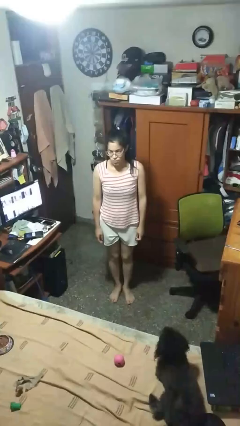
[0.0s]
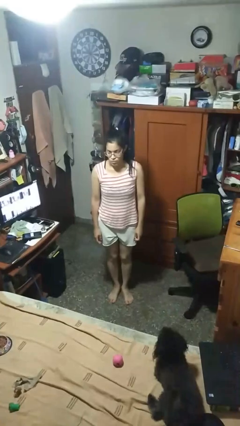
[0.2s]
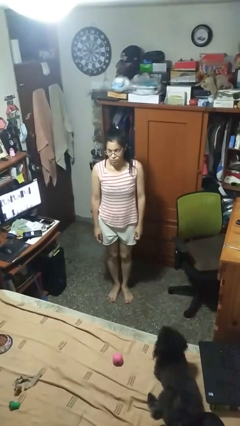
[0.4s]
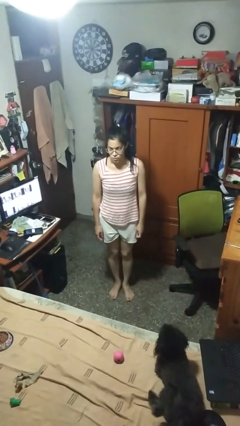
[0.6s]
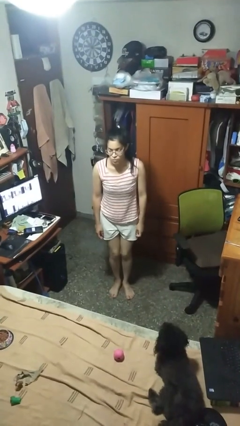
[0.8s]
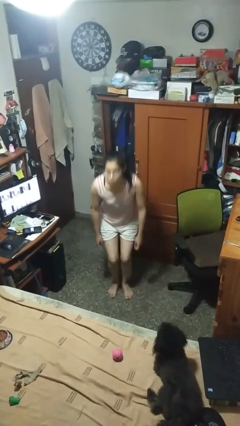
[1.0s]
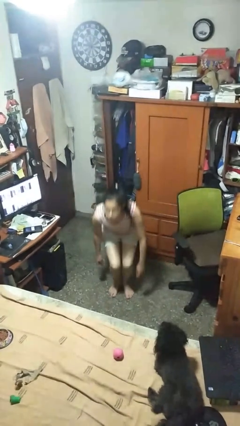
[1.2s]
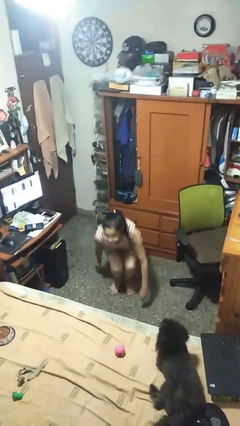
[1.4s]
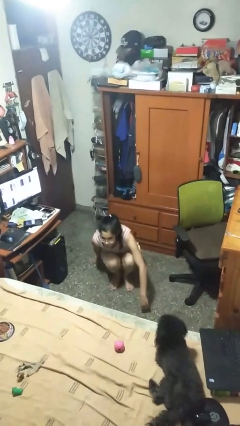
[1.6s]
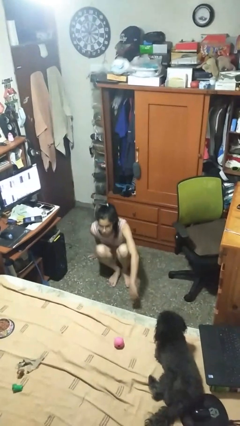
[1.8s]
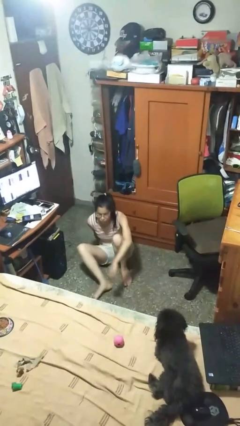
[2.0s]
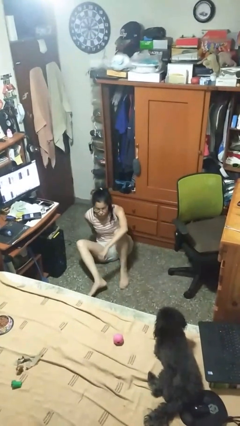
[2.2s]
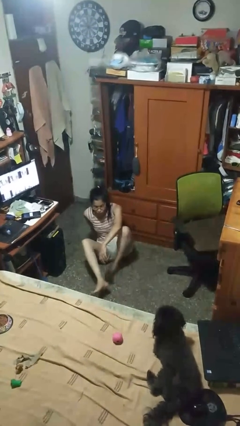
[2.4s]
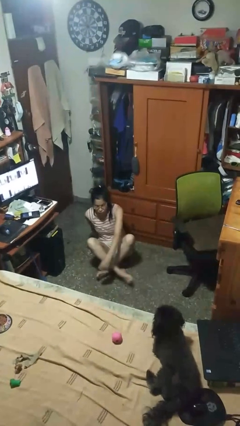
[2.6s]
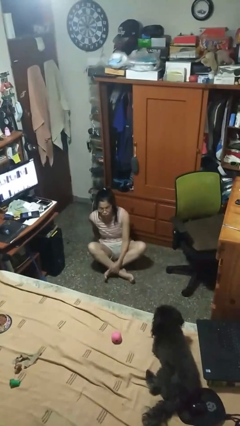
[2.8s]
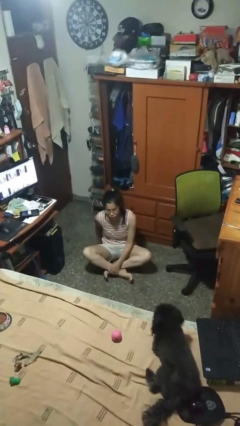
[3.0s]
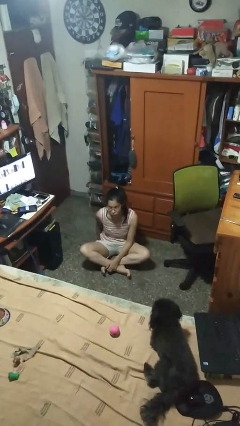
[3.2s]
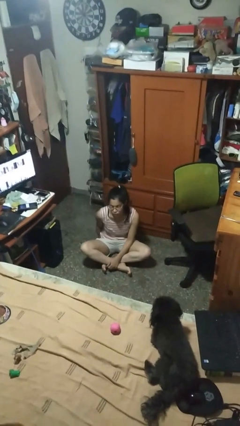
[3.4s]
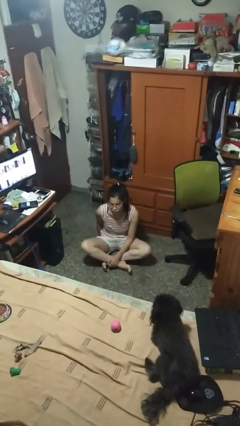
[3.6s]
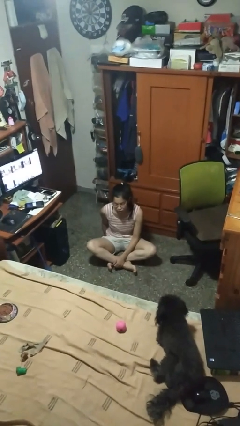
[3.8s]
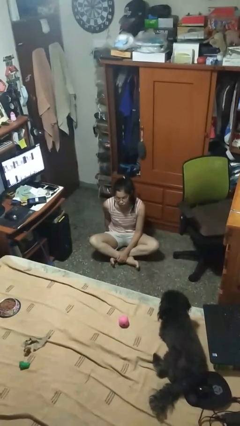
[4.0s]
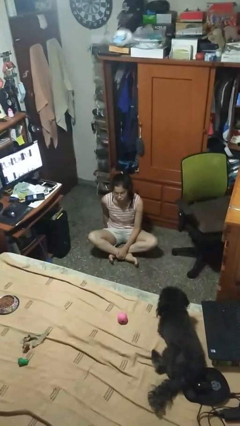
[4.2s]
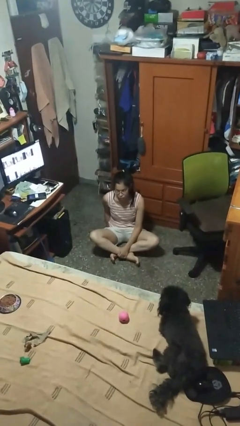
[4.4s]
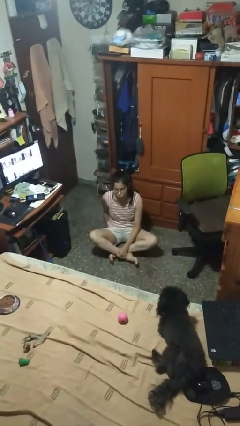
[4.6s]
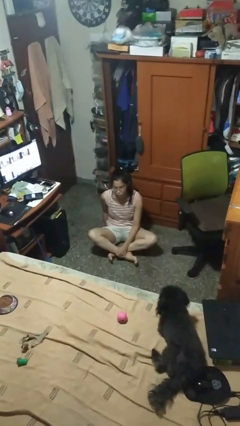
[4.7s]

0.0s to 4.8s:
person sits crisscross

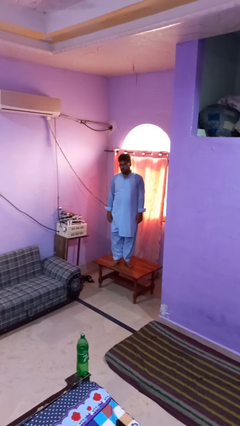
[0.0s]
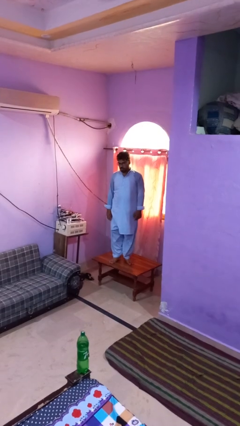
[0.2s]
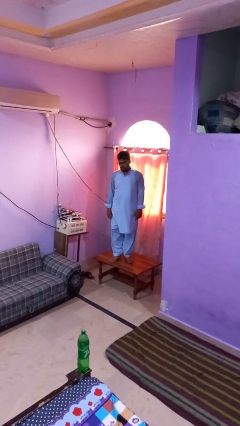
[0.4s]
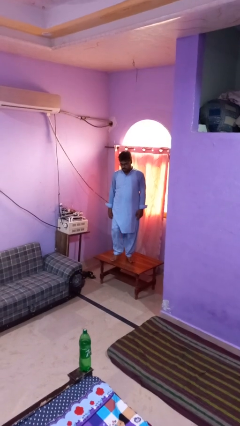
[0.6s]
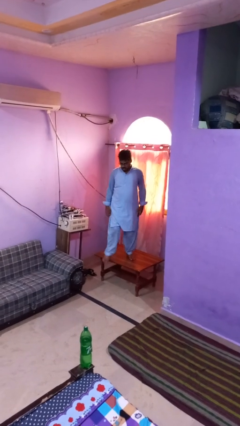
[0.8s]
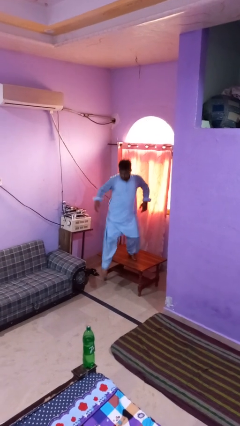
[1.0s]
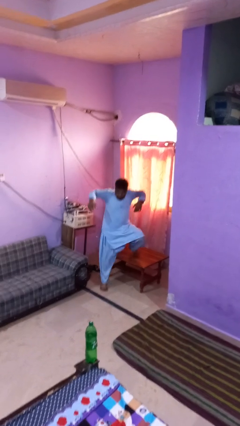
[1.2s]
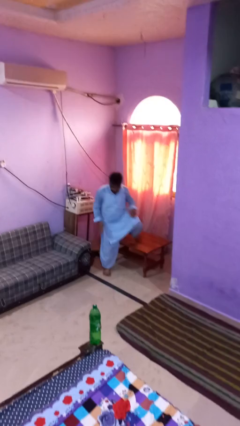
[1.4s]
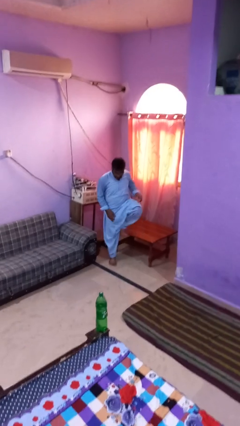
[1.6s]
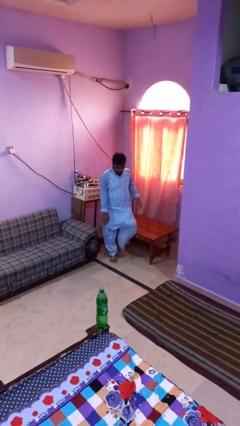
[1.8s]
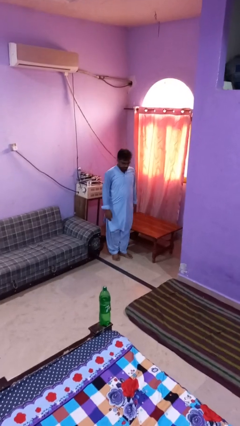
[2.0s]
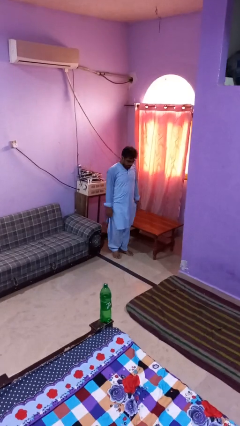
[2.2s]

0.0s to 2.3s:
person climbs off table

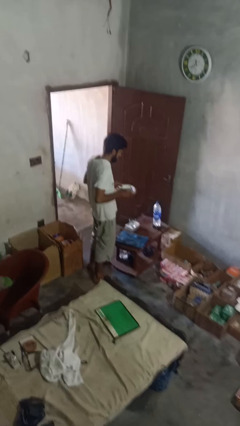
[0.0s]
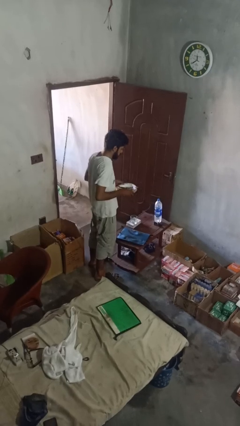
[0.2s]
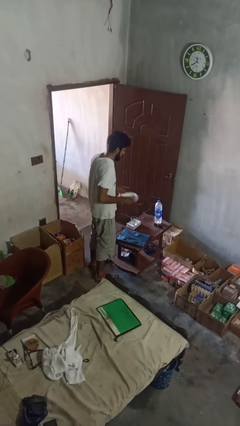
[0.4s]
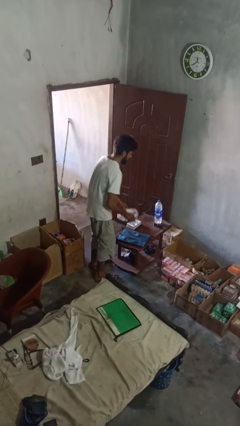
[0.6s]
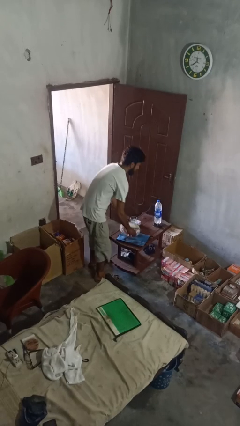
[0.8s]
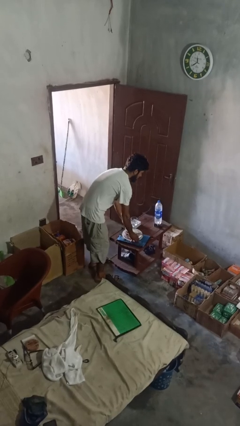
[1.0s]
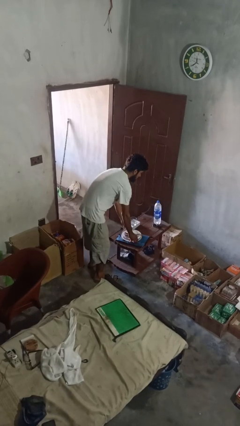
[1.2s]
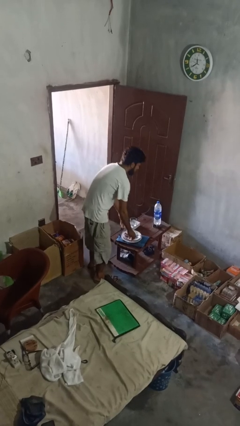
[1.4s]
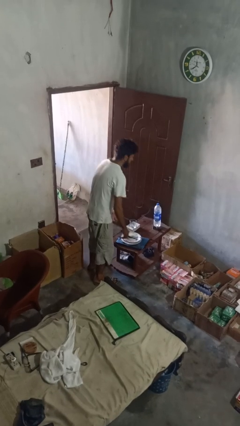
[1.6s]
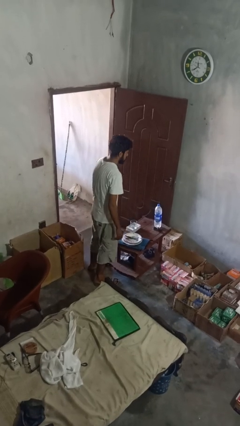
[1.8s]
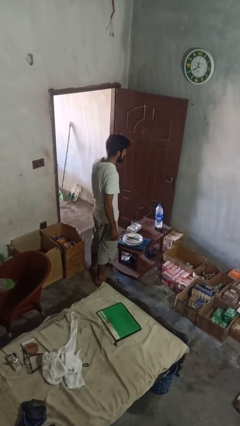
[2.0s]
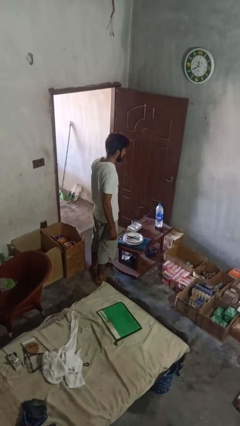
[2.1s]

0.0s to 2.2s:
person puts down object on countertop

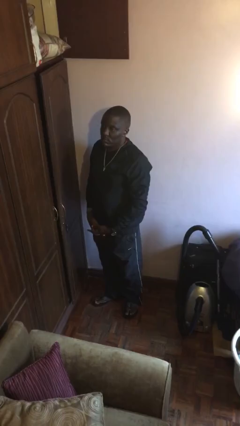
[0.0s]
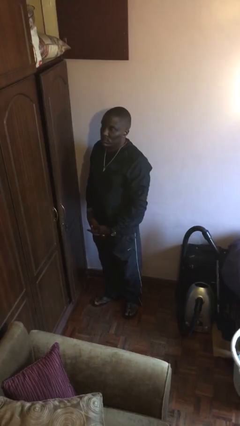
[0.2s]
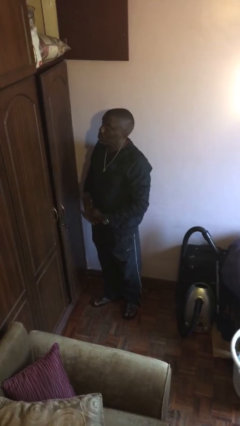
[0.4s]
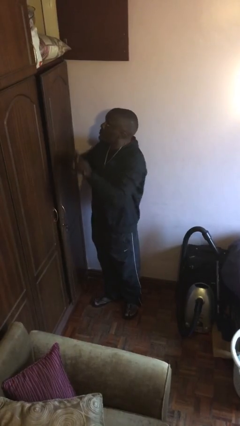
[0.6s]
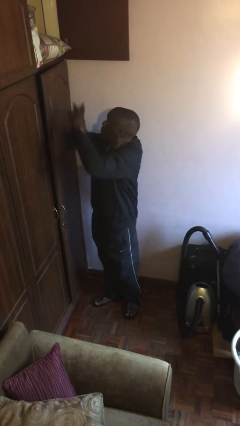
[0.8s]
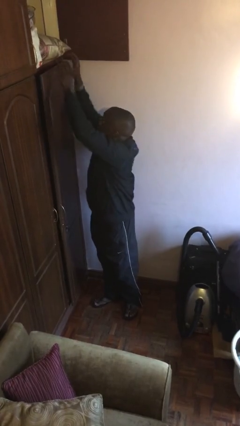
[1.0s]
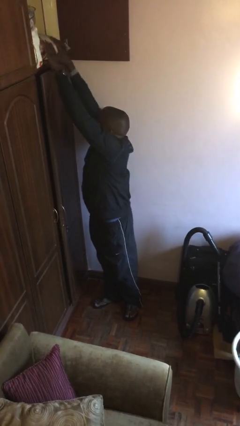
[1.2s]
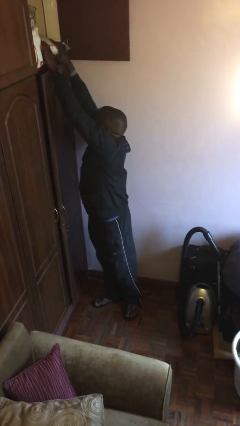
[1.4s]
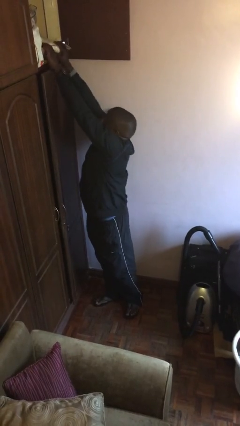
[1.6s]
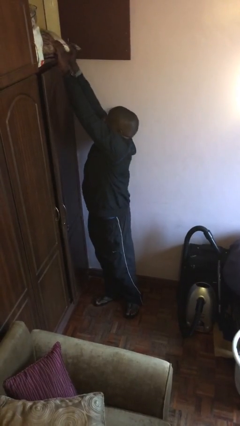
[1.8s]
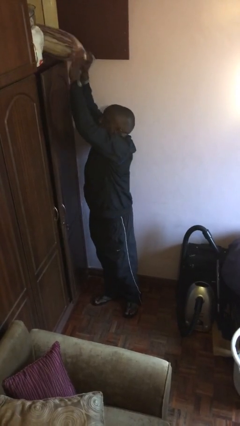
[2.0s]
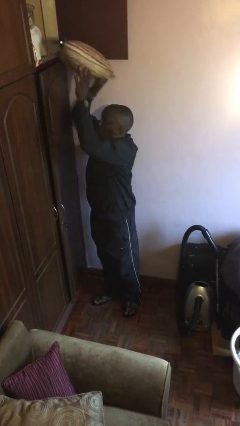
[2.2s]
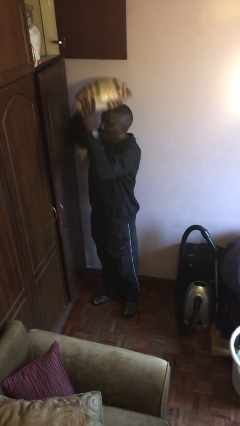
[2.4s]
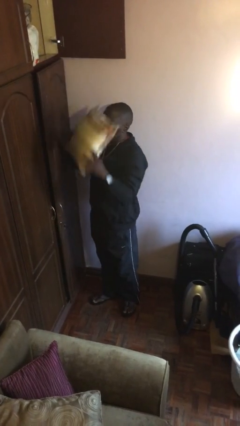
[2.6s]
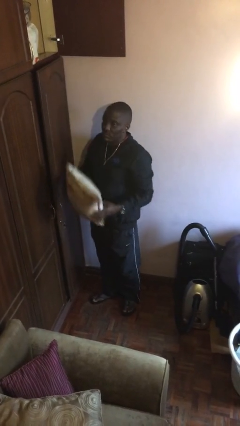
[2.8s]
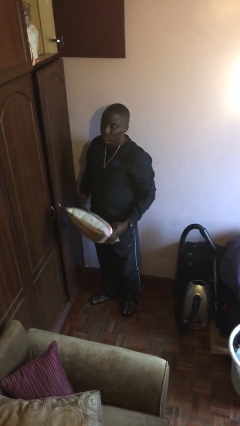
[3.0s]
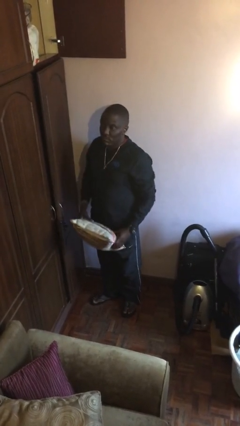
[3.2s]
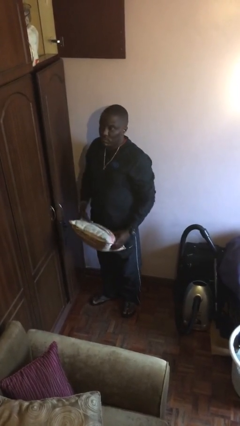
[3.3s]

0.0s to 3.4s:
person picks up object from shelf

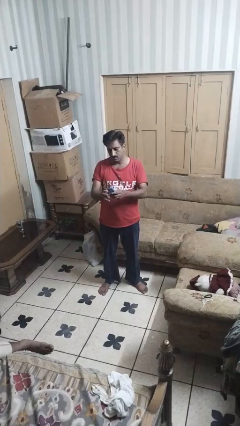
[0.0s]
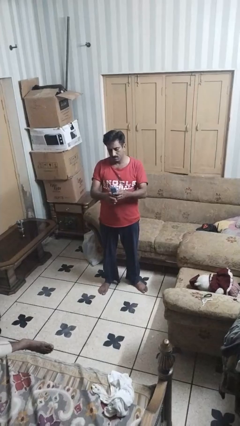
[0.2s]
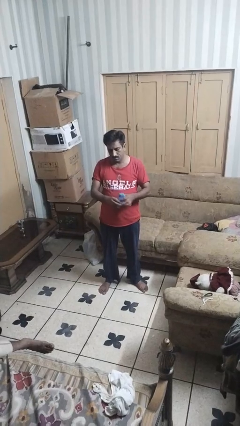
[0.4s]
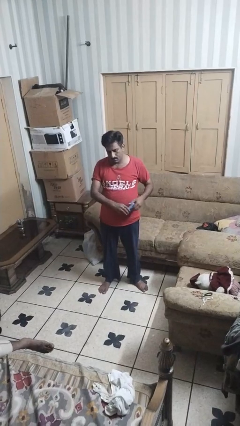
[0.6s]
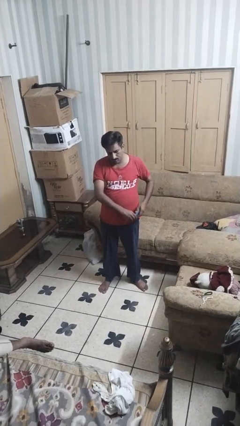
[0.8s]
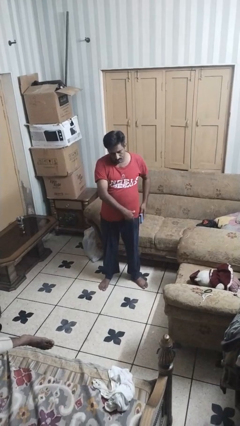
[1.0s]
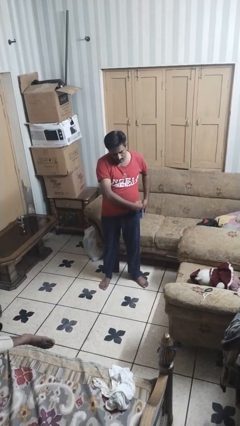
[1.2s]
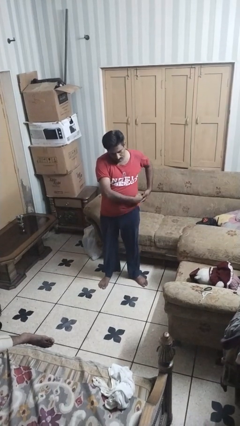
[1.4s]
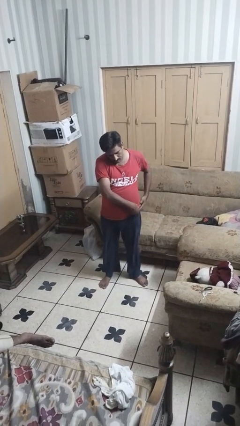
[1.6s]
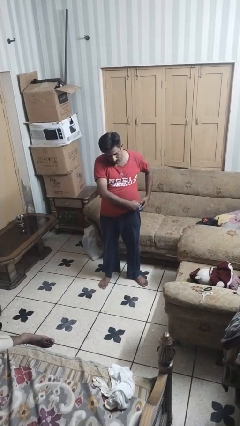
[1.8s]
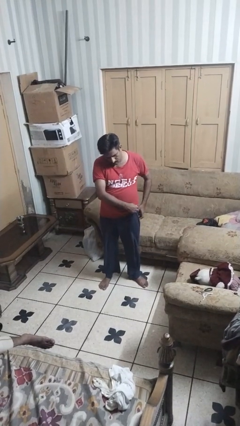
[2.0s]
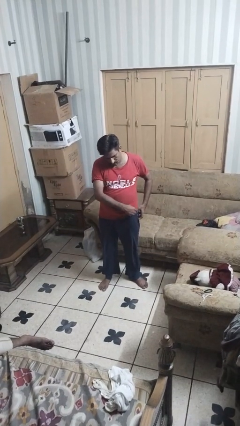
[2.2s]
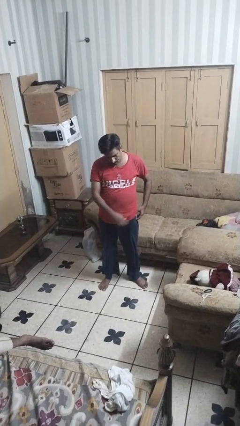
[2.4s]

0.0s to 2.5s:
person puts phone into pocket

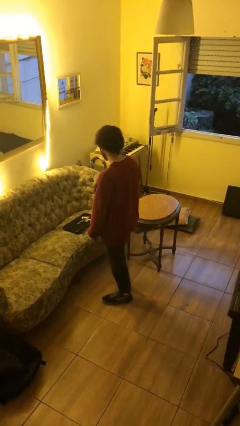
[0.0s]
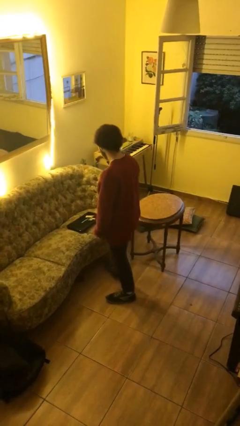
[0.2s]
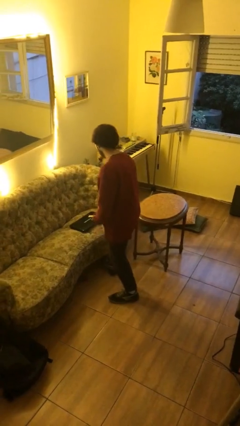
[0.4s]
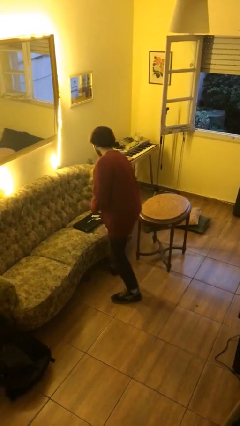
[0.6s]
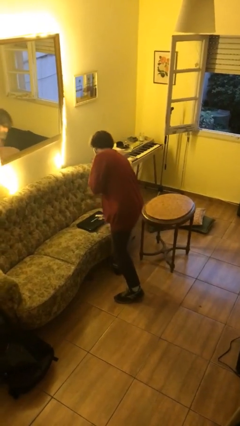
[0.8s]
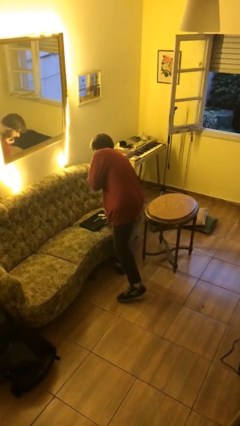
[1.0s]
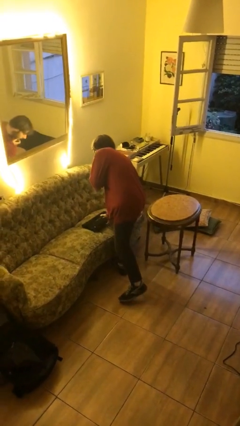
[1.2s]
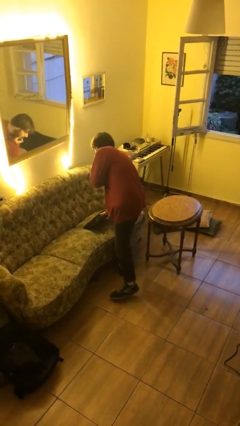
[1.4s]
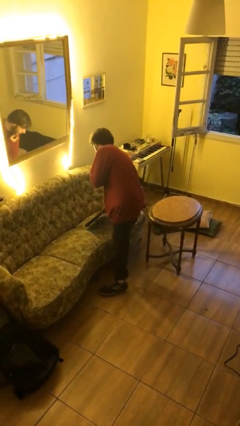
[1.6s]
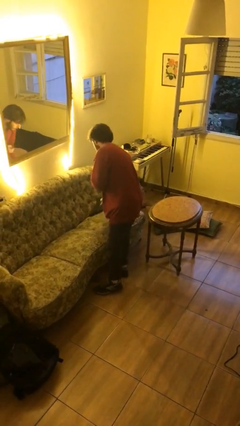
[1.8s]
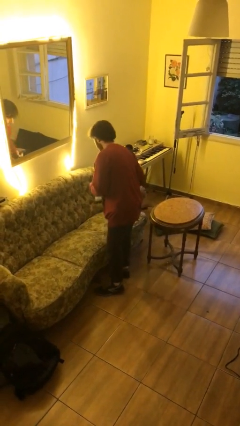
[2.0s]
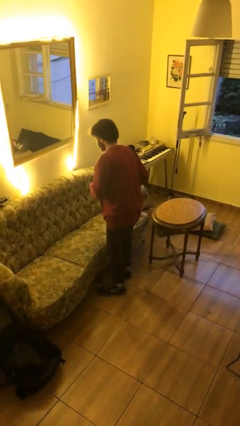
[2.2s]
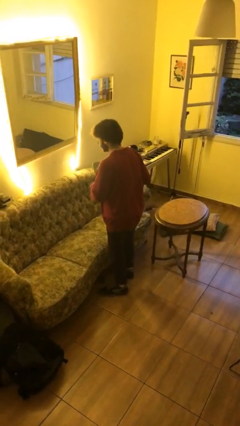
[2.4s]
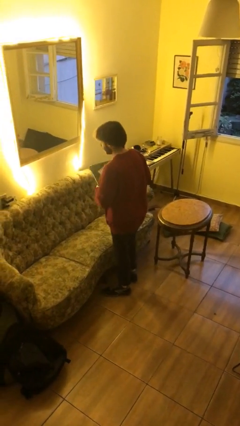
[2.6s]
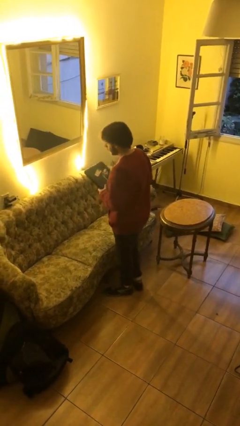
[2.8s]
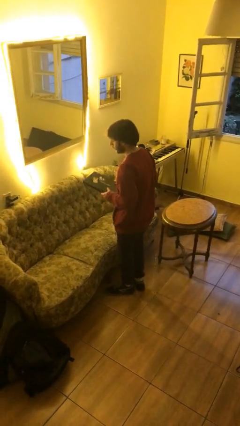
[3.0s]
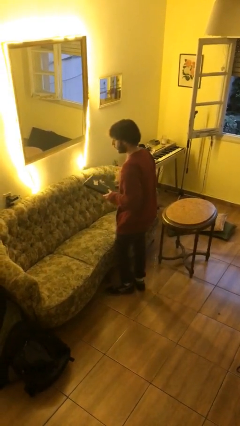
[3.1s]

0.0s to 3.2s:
person picks up object from couch
